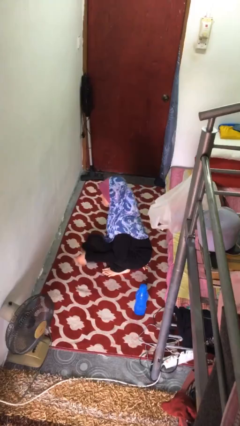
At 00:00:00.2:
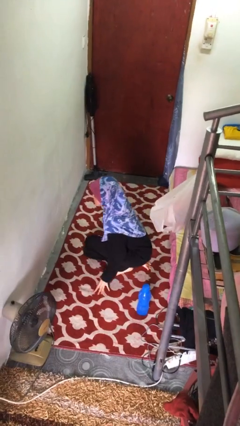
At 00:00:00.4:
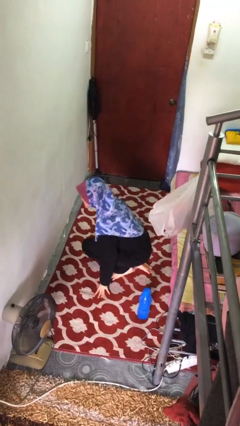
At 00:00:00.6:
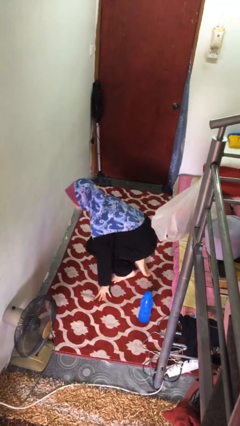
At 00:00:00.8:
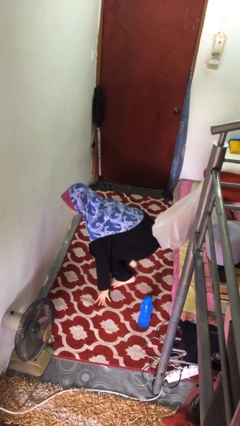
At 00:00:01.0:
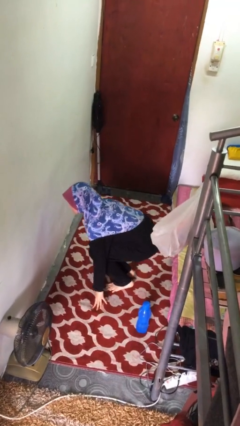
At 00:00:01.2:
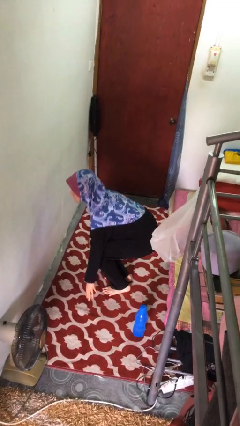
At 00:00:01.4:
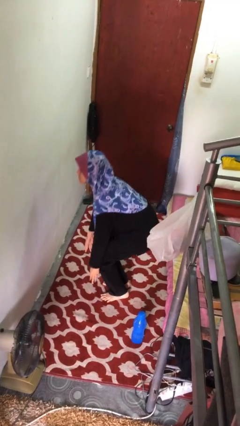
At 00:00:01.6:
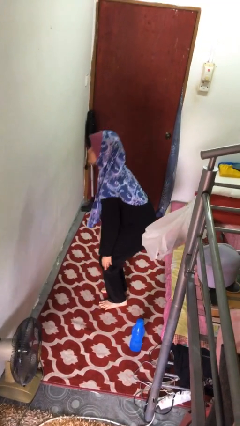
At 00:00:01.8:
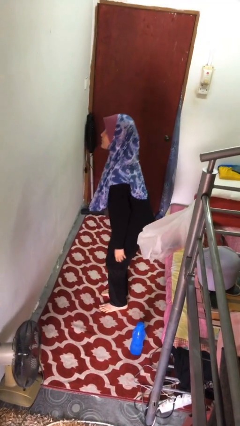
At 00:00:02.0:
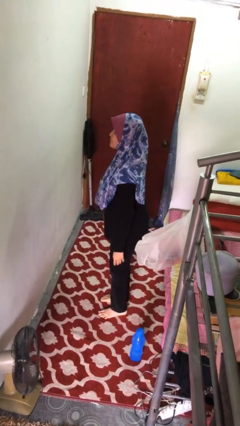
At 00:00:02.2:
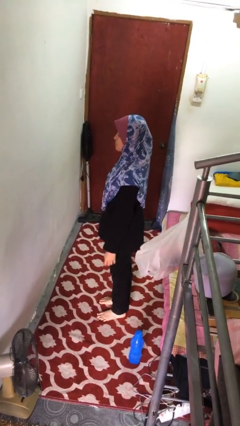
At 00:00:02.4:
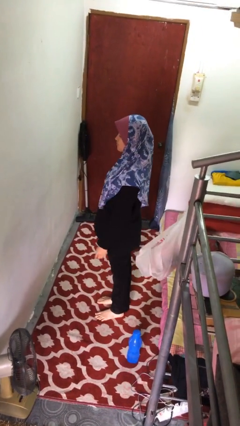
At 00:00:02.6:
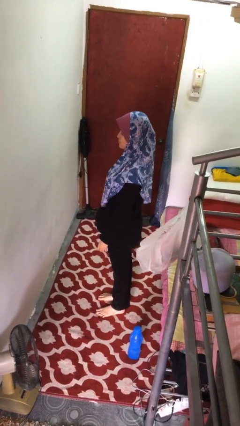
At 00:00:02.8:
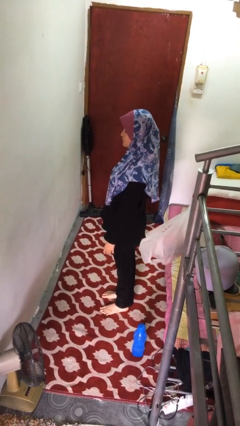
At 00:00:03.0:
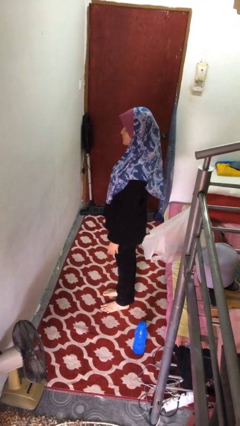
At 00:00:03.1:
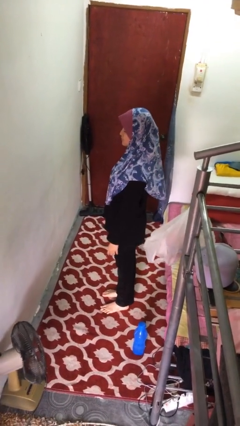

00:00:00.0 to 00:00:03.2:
person stands up from floor

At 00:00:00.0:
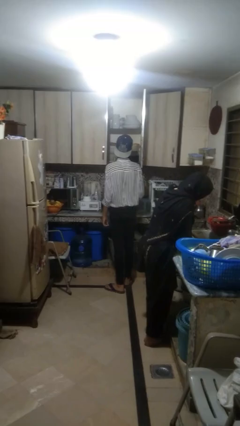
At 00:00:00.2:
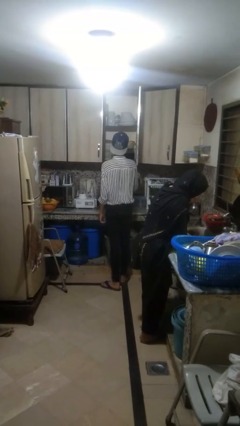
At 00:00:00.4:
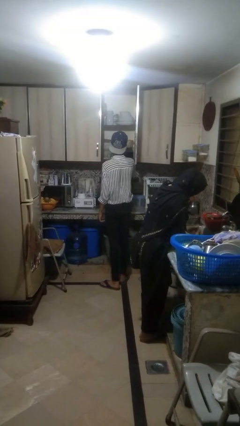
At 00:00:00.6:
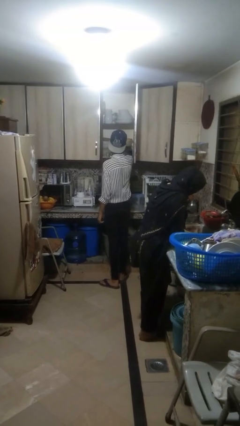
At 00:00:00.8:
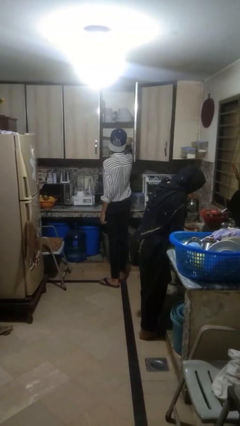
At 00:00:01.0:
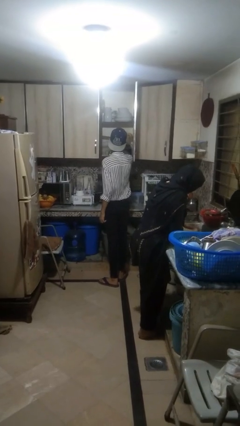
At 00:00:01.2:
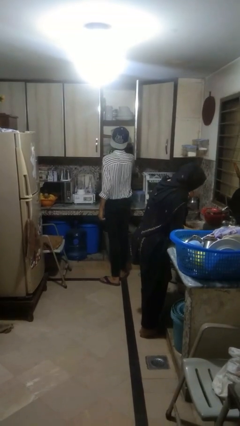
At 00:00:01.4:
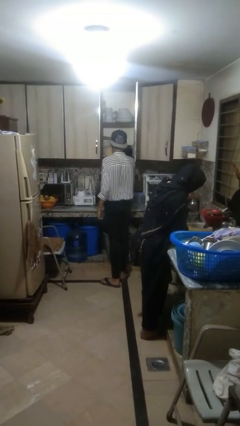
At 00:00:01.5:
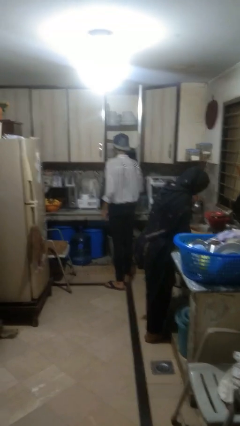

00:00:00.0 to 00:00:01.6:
person takes object from cabinet

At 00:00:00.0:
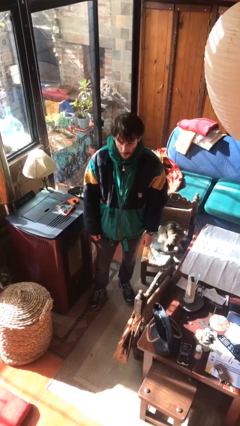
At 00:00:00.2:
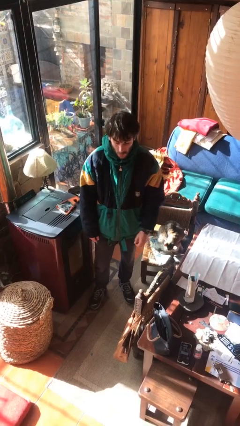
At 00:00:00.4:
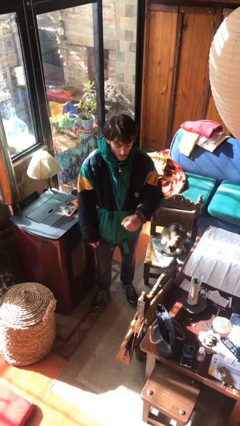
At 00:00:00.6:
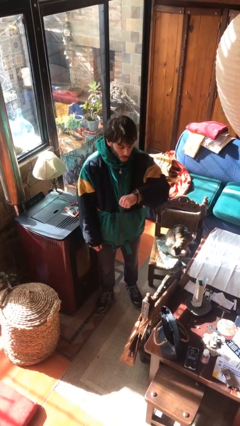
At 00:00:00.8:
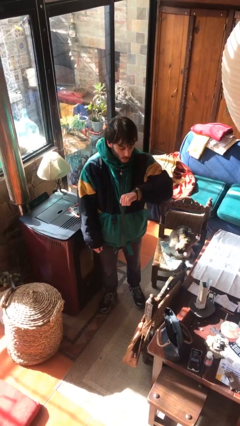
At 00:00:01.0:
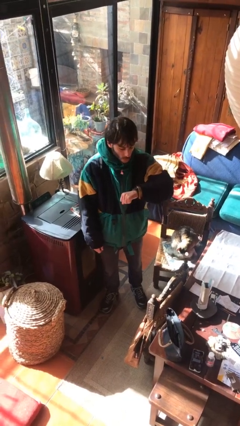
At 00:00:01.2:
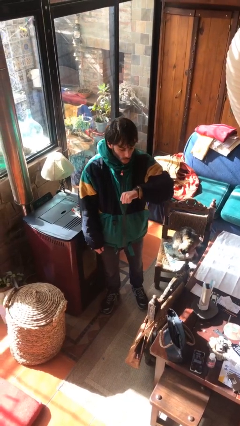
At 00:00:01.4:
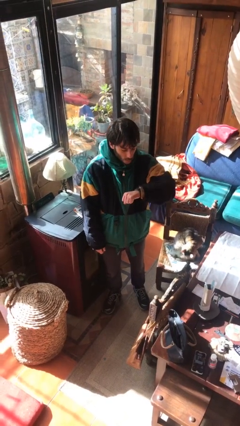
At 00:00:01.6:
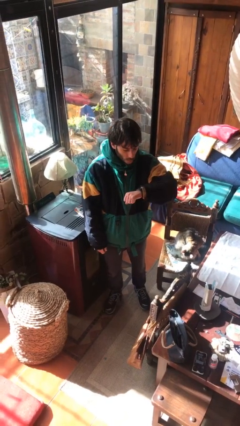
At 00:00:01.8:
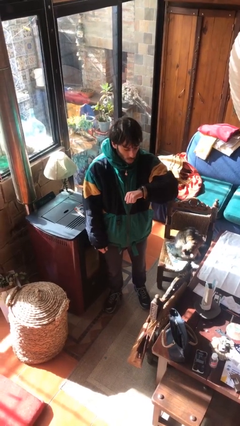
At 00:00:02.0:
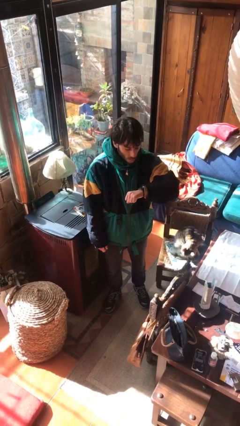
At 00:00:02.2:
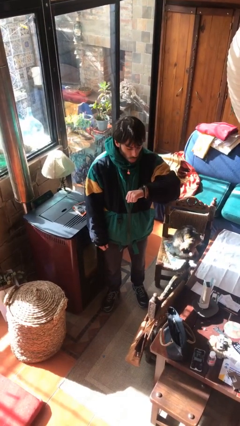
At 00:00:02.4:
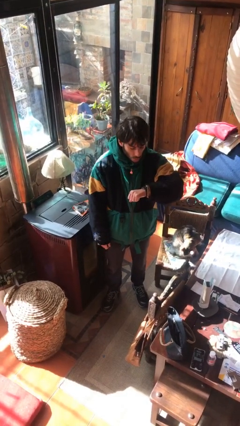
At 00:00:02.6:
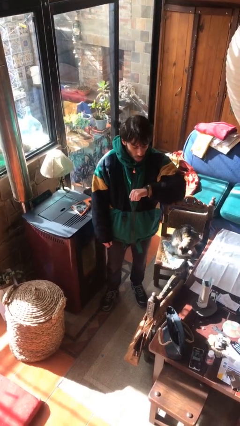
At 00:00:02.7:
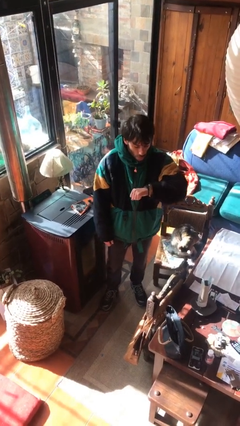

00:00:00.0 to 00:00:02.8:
person looks at wristwatch

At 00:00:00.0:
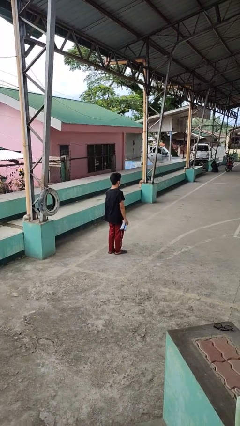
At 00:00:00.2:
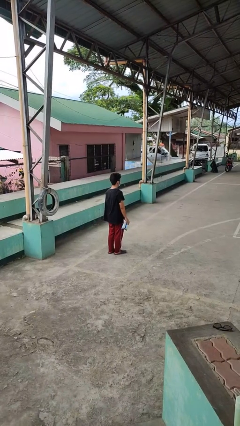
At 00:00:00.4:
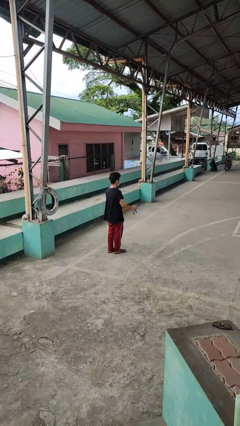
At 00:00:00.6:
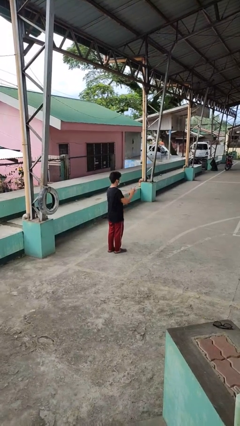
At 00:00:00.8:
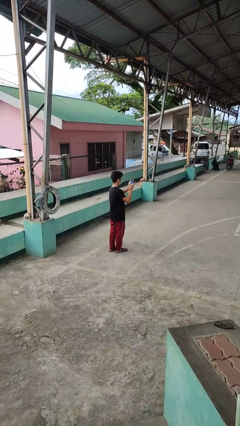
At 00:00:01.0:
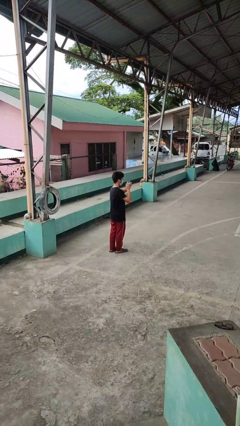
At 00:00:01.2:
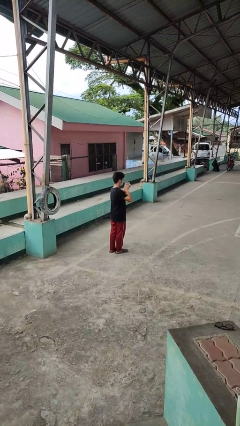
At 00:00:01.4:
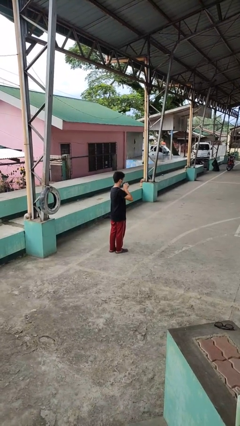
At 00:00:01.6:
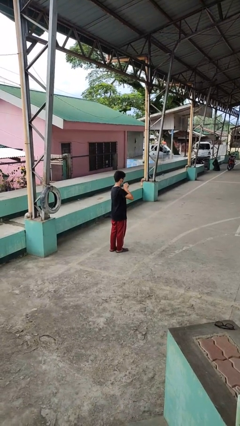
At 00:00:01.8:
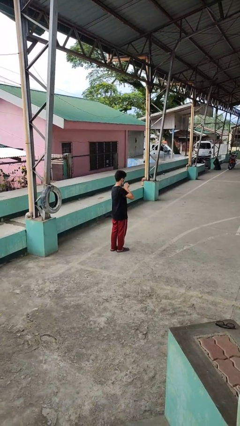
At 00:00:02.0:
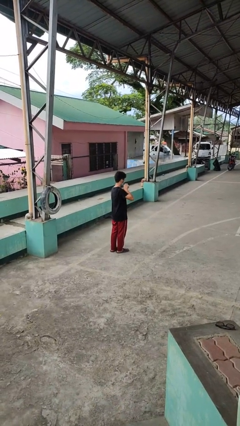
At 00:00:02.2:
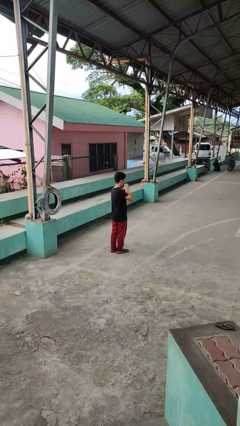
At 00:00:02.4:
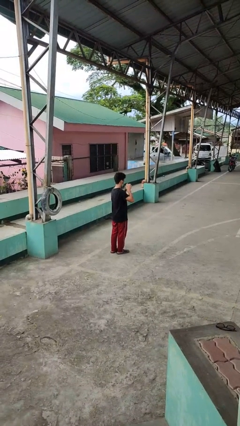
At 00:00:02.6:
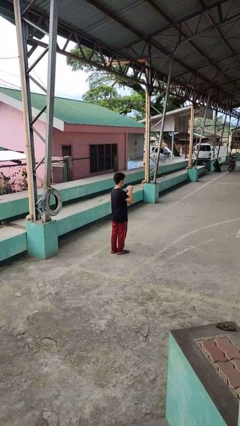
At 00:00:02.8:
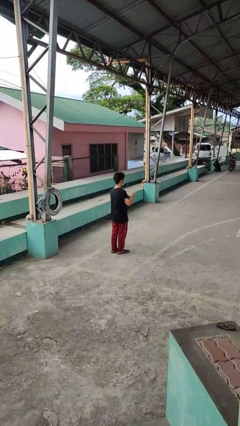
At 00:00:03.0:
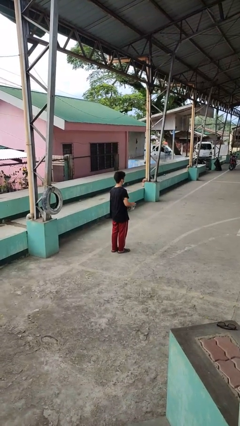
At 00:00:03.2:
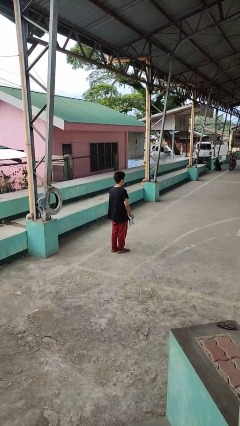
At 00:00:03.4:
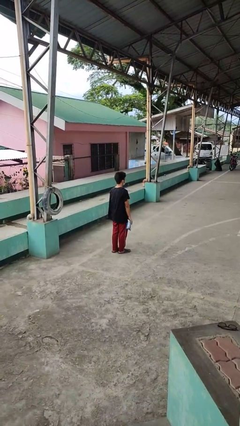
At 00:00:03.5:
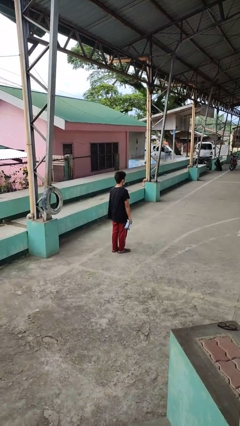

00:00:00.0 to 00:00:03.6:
person squeezes object

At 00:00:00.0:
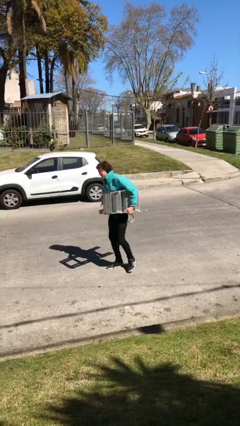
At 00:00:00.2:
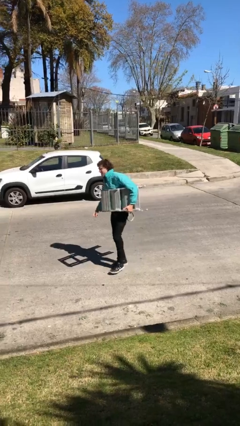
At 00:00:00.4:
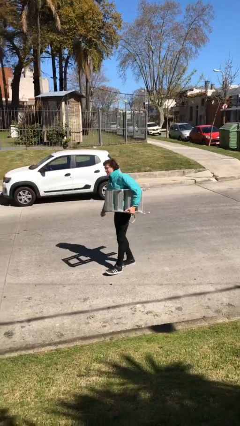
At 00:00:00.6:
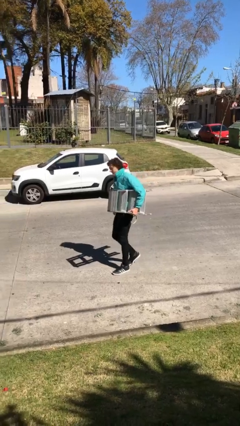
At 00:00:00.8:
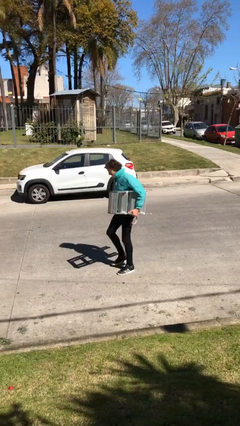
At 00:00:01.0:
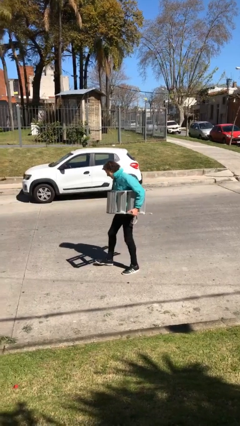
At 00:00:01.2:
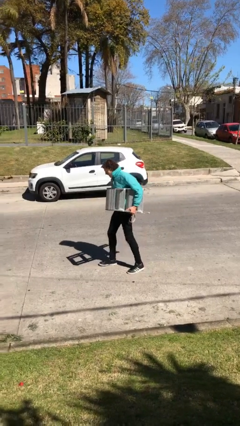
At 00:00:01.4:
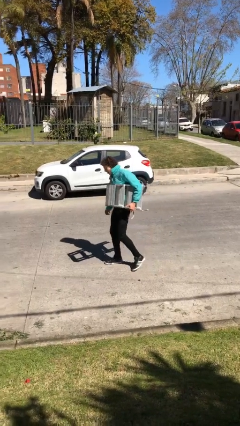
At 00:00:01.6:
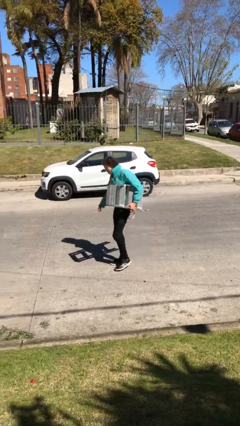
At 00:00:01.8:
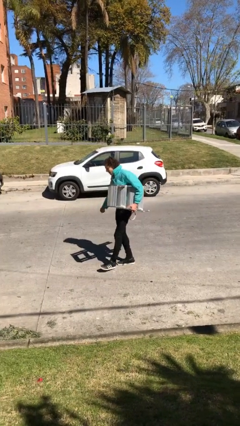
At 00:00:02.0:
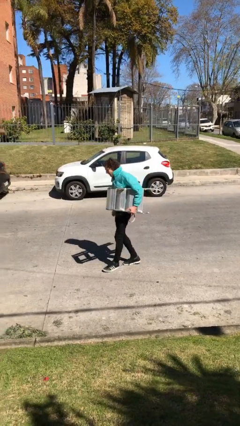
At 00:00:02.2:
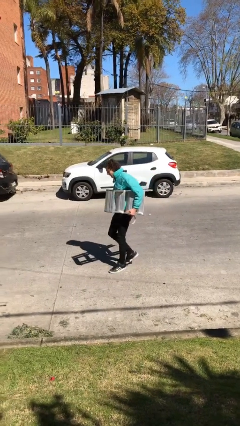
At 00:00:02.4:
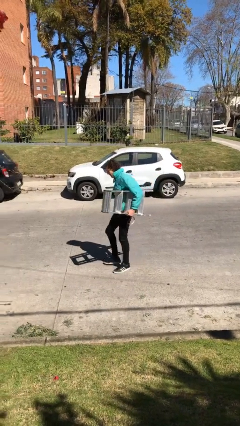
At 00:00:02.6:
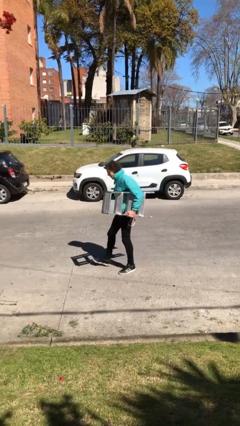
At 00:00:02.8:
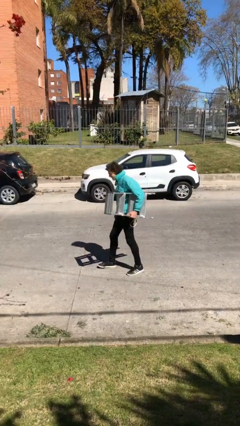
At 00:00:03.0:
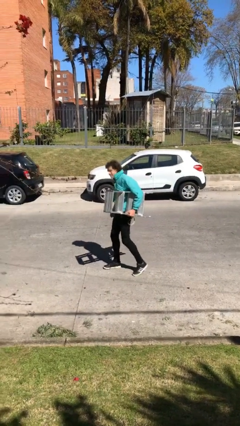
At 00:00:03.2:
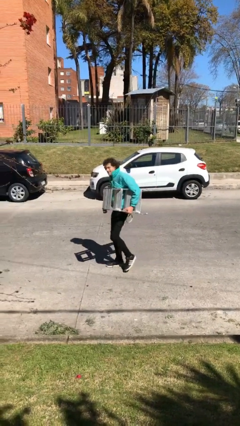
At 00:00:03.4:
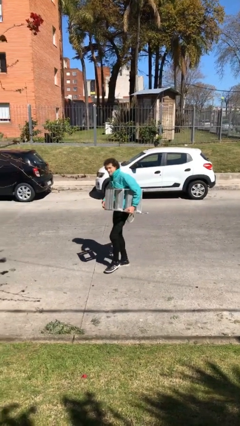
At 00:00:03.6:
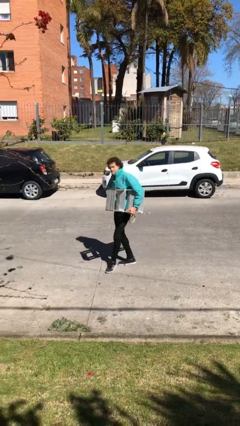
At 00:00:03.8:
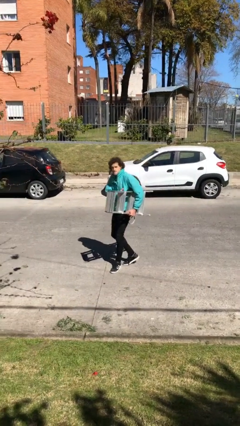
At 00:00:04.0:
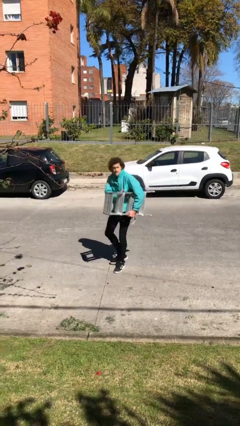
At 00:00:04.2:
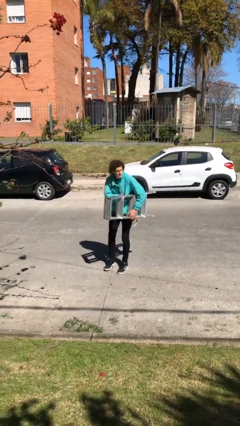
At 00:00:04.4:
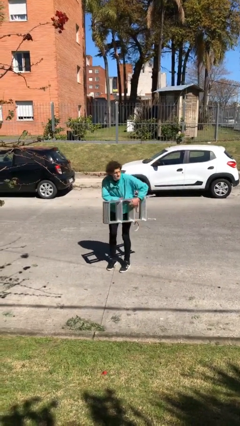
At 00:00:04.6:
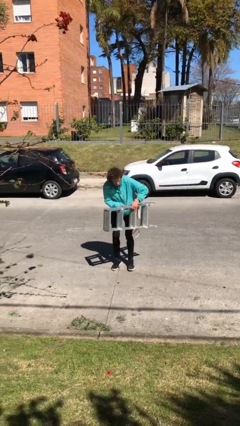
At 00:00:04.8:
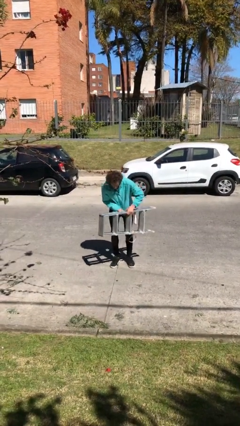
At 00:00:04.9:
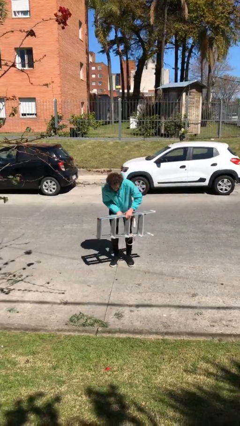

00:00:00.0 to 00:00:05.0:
person carries heavy object

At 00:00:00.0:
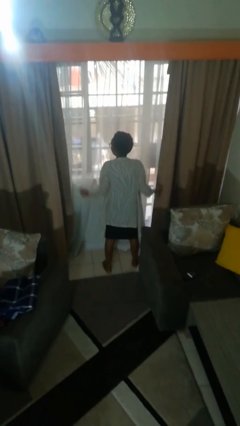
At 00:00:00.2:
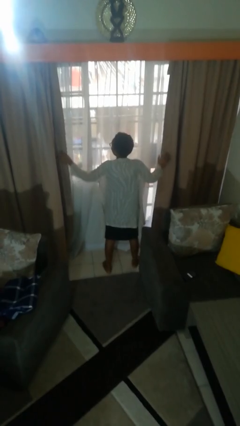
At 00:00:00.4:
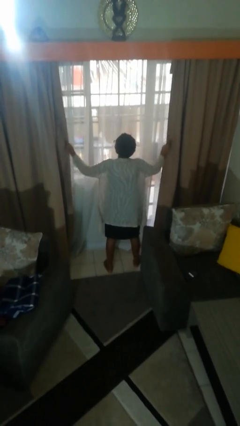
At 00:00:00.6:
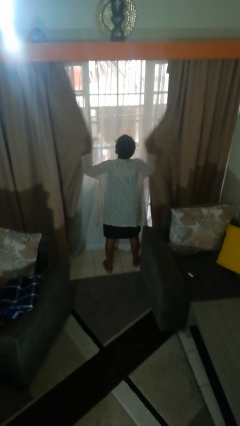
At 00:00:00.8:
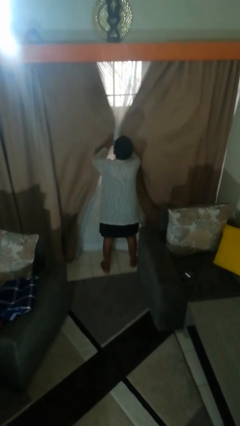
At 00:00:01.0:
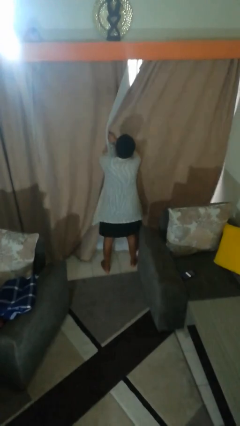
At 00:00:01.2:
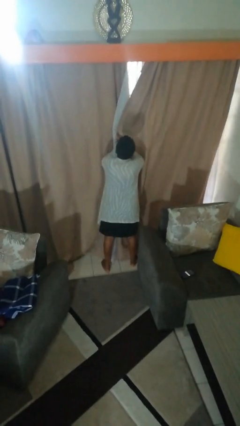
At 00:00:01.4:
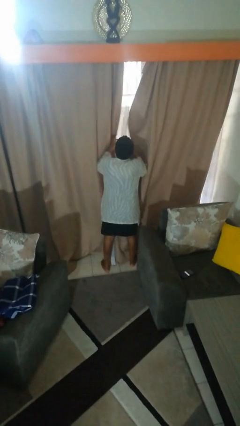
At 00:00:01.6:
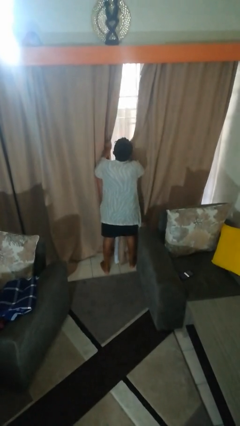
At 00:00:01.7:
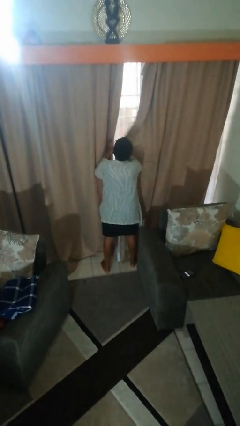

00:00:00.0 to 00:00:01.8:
person closes curtains
